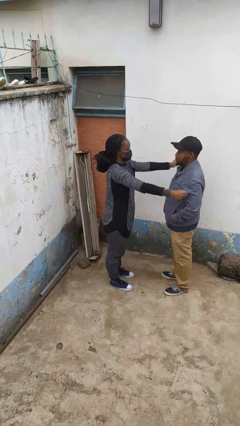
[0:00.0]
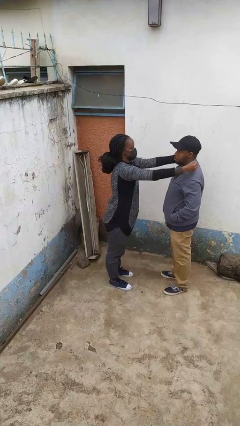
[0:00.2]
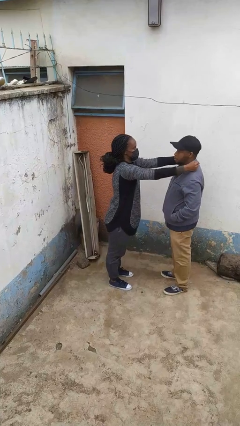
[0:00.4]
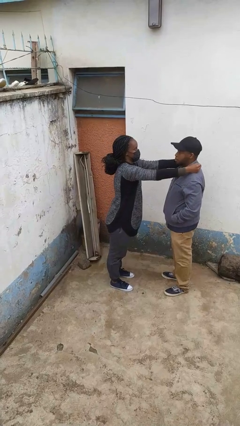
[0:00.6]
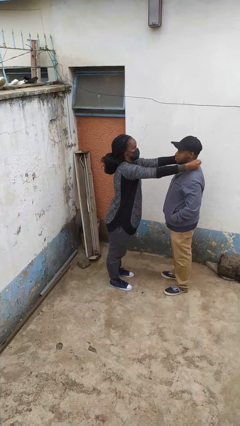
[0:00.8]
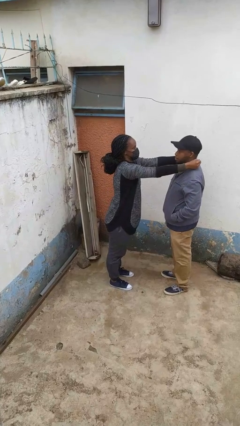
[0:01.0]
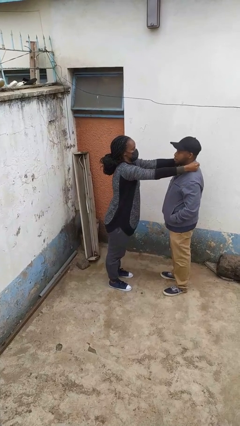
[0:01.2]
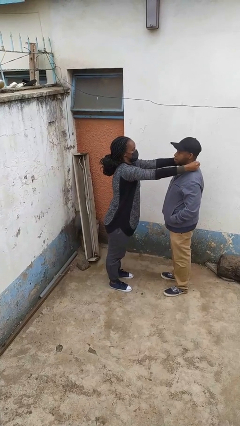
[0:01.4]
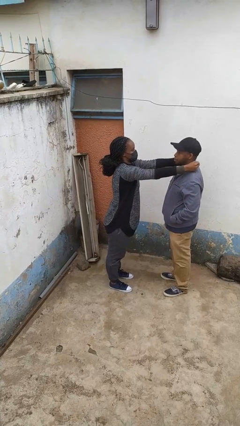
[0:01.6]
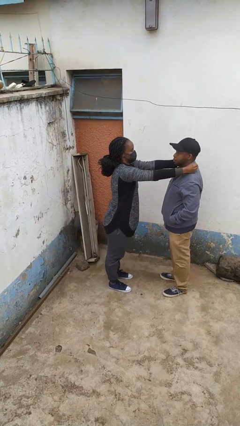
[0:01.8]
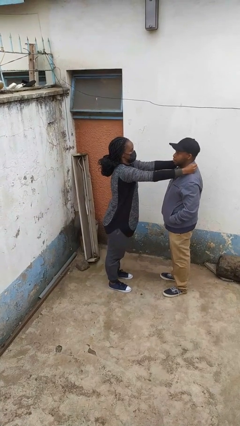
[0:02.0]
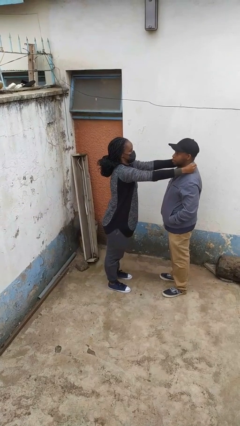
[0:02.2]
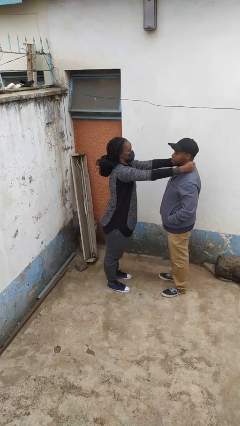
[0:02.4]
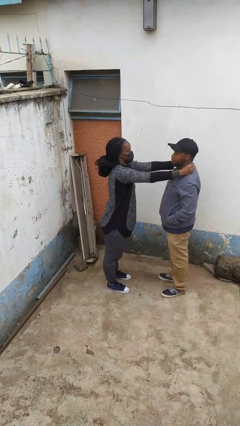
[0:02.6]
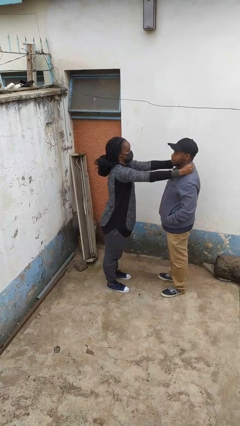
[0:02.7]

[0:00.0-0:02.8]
person pounds shoulders of person

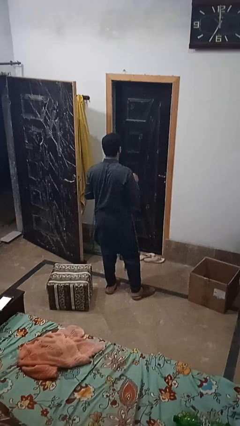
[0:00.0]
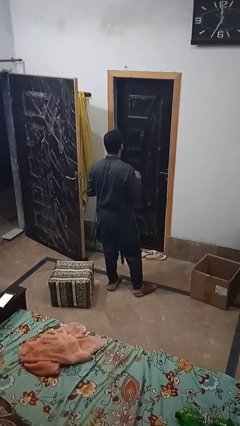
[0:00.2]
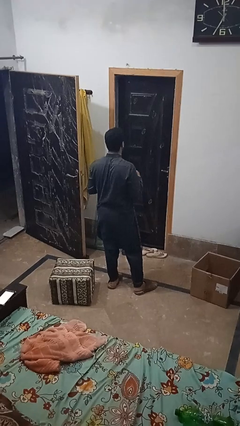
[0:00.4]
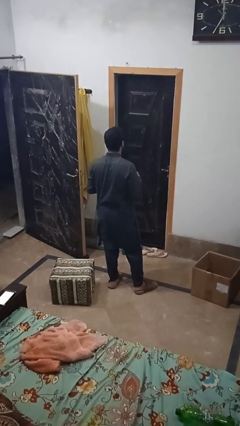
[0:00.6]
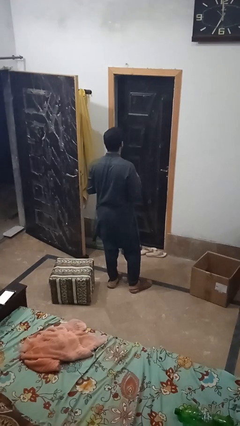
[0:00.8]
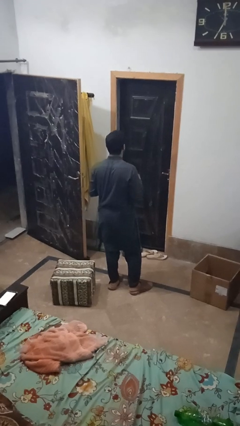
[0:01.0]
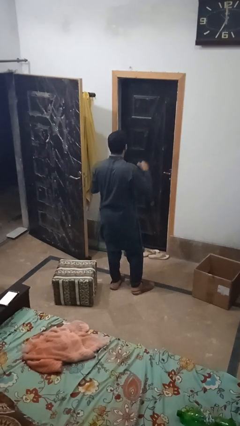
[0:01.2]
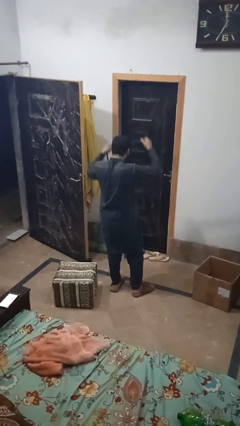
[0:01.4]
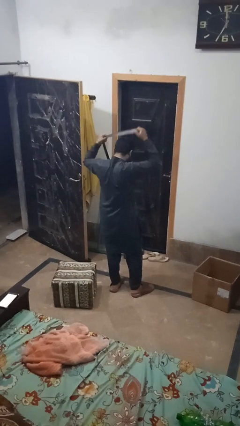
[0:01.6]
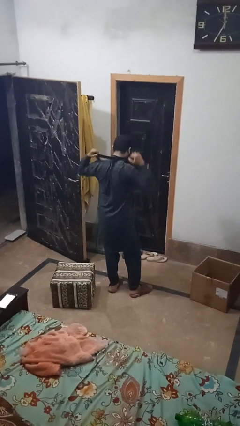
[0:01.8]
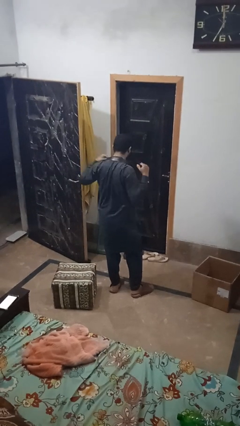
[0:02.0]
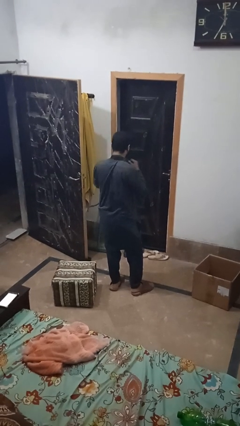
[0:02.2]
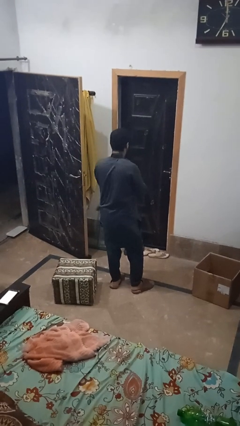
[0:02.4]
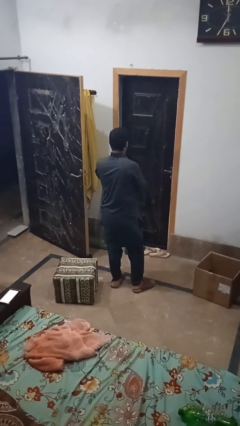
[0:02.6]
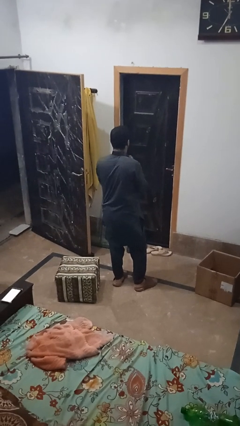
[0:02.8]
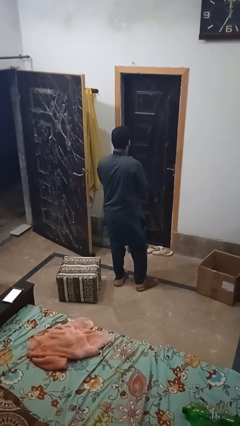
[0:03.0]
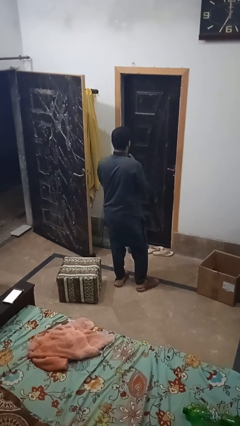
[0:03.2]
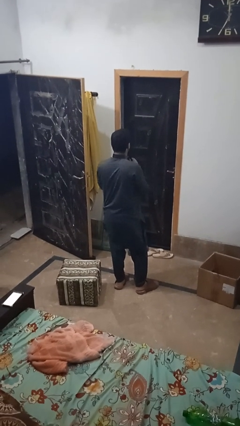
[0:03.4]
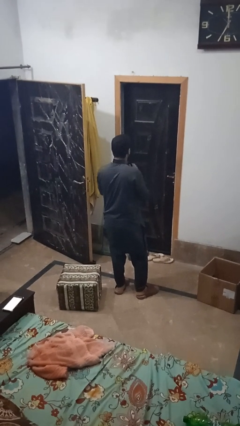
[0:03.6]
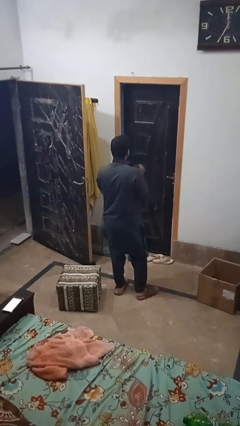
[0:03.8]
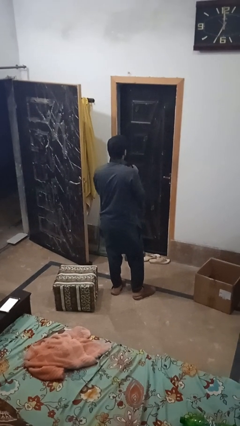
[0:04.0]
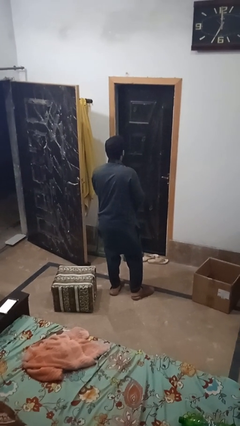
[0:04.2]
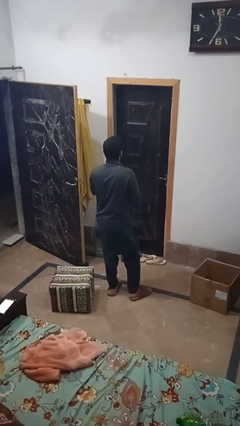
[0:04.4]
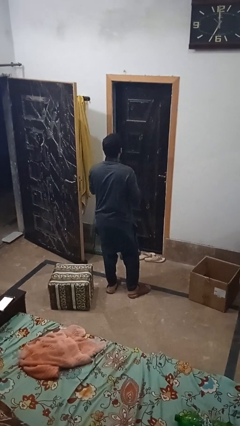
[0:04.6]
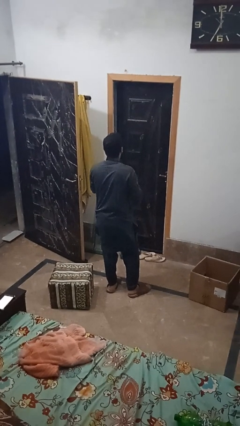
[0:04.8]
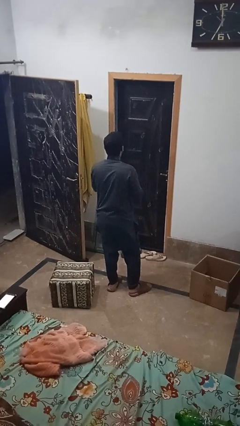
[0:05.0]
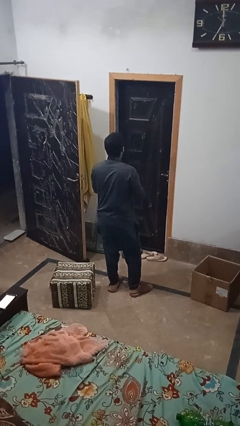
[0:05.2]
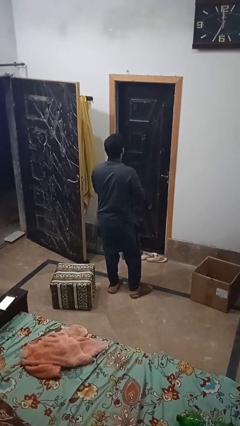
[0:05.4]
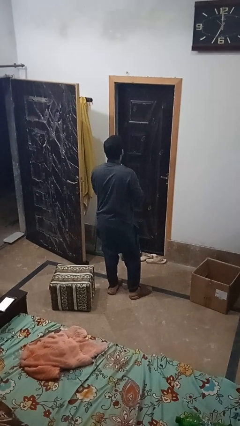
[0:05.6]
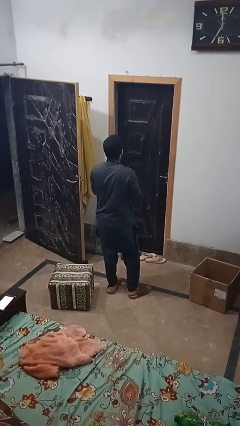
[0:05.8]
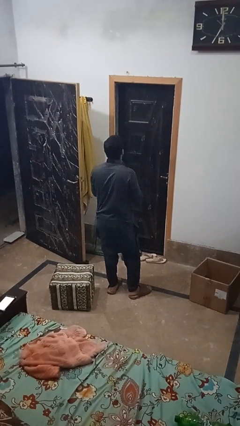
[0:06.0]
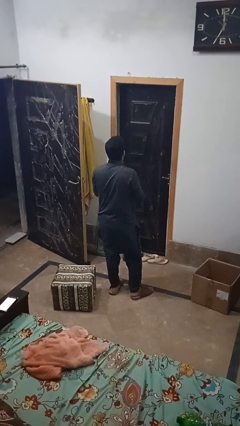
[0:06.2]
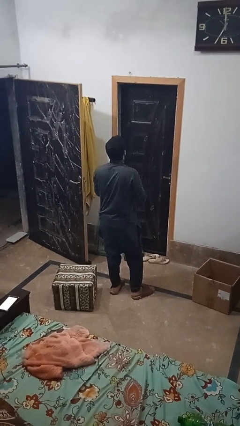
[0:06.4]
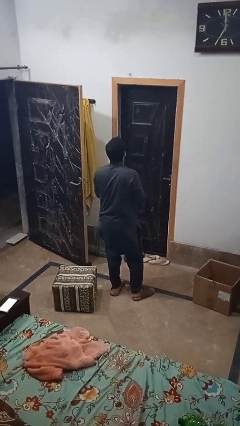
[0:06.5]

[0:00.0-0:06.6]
person puts on necktie

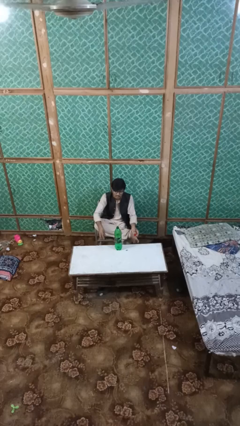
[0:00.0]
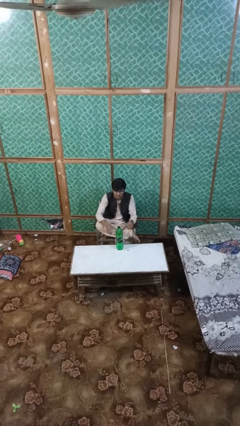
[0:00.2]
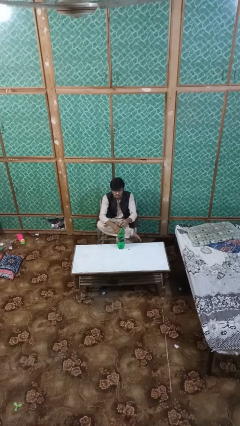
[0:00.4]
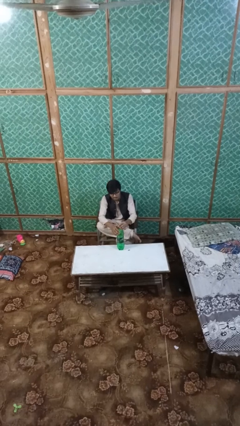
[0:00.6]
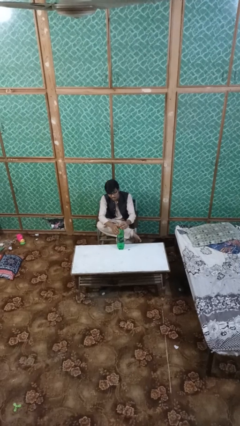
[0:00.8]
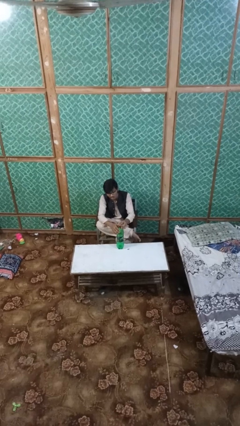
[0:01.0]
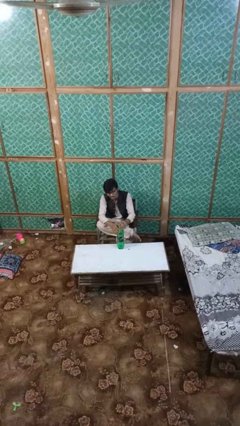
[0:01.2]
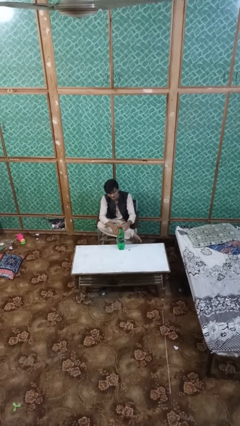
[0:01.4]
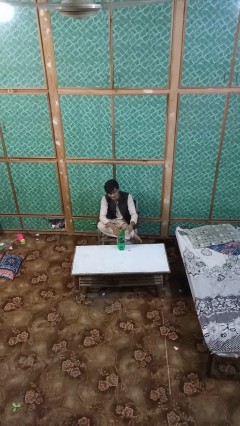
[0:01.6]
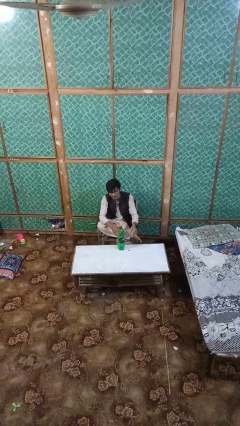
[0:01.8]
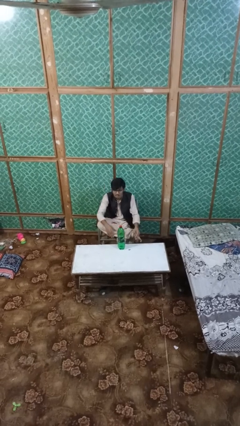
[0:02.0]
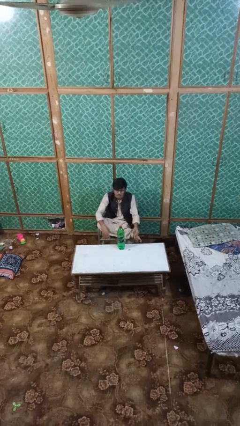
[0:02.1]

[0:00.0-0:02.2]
person screws lid to bottle

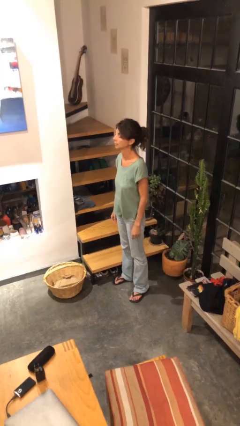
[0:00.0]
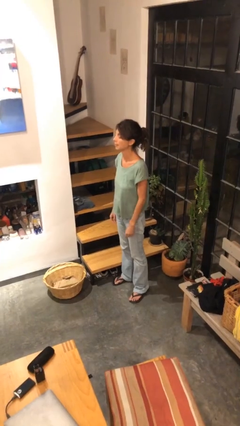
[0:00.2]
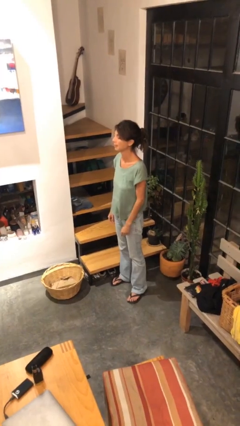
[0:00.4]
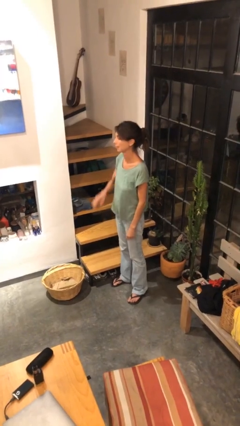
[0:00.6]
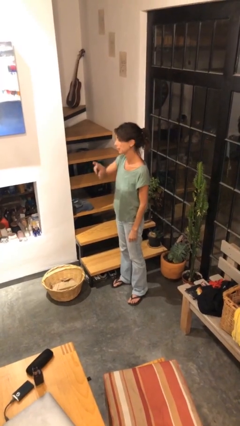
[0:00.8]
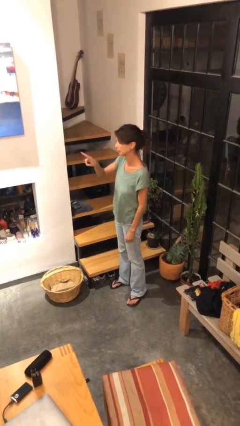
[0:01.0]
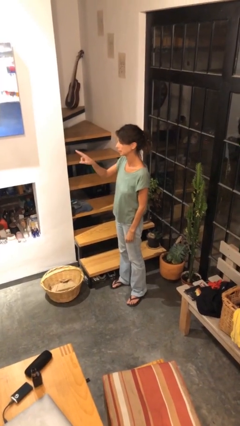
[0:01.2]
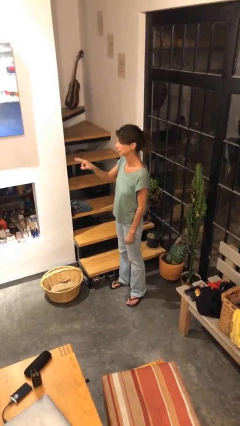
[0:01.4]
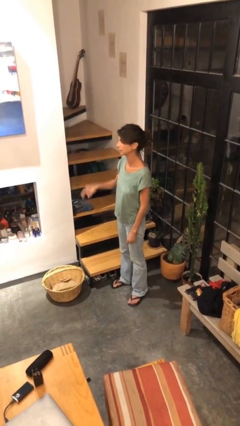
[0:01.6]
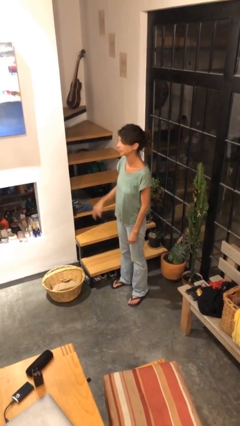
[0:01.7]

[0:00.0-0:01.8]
person gestures swipe right

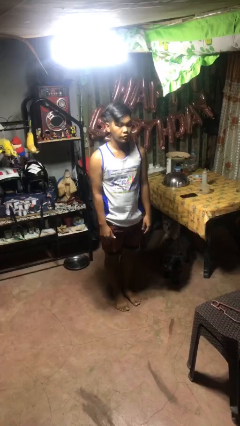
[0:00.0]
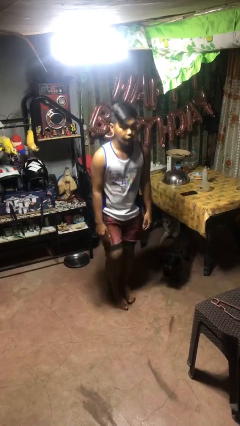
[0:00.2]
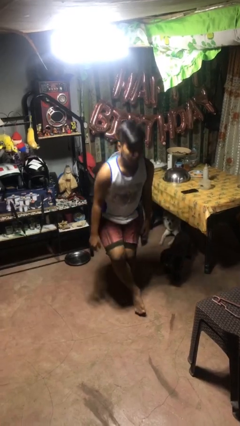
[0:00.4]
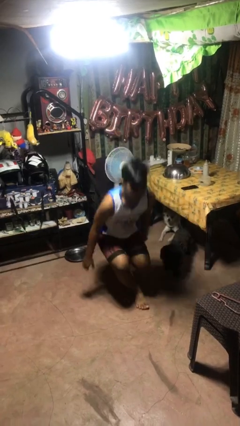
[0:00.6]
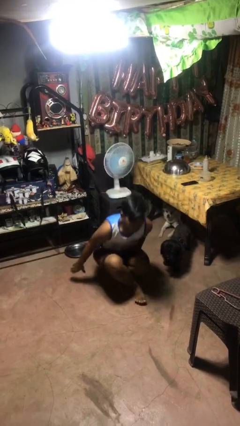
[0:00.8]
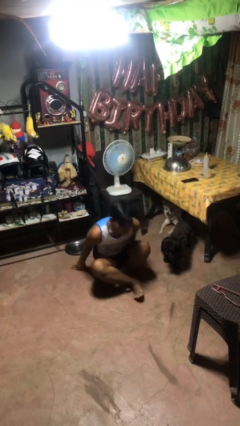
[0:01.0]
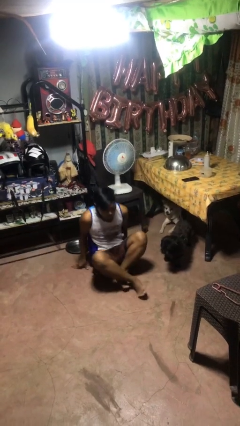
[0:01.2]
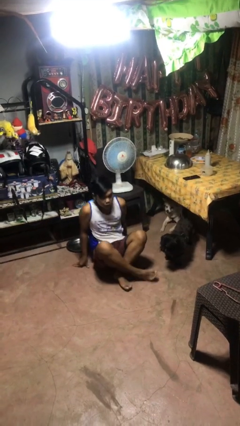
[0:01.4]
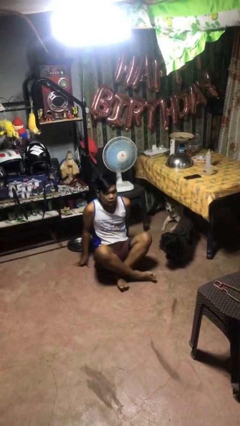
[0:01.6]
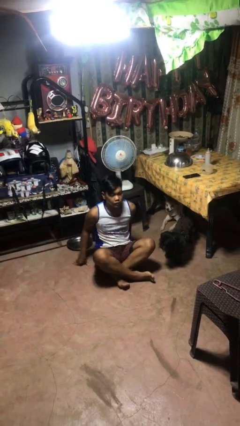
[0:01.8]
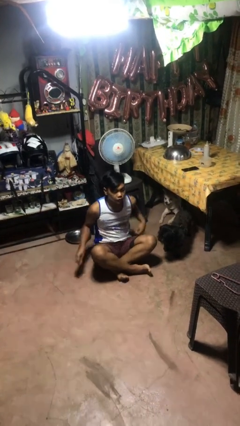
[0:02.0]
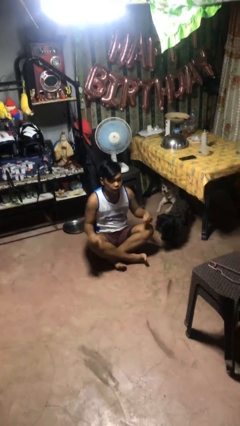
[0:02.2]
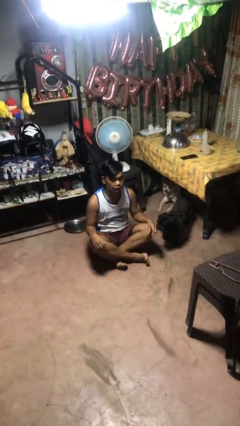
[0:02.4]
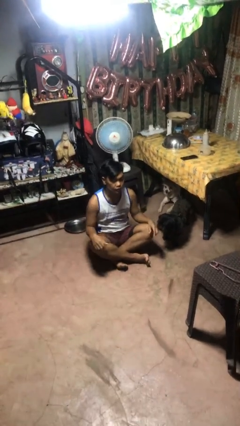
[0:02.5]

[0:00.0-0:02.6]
person sits crisscross

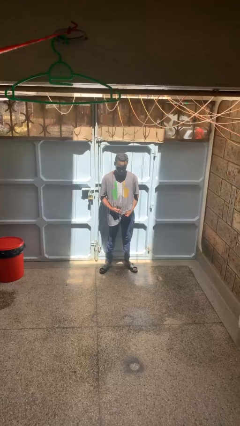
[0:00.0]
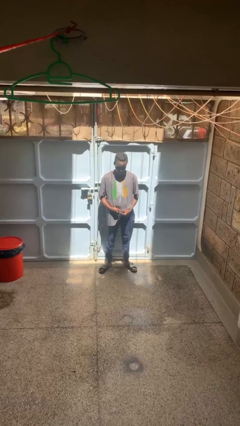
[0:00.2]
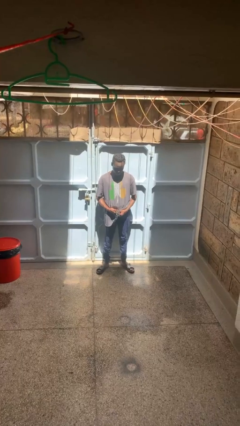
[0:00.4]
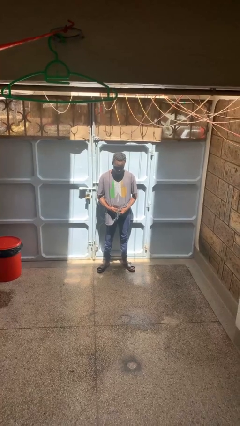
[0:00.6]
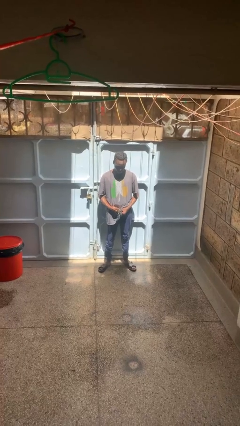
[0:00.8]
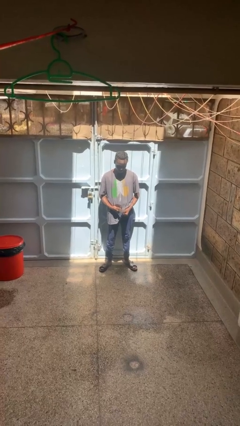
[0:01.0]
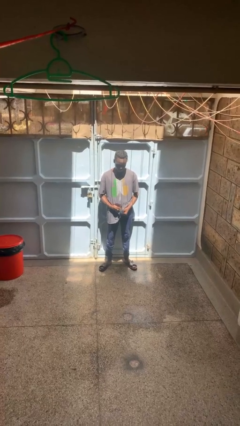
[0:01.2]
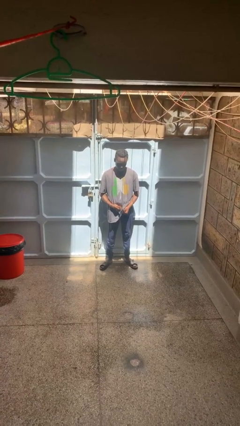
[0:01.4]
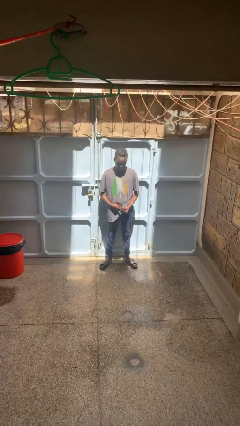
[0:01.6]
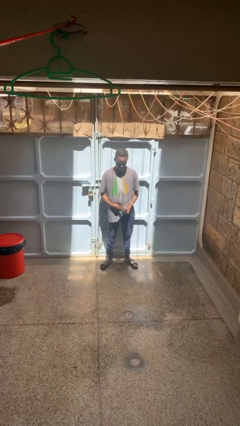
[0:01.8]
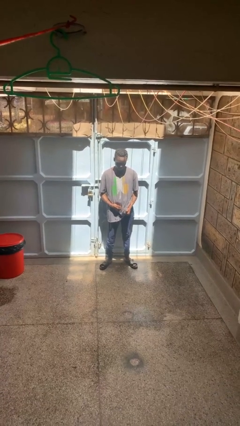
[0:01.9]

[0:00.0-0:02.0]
person cleans eyeglasses
